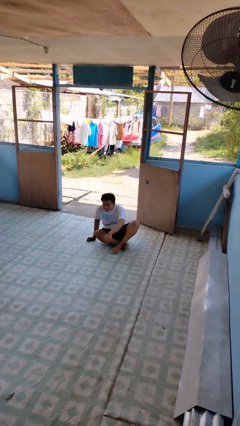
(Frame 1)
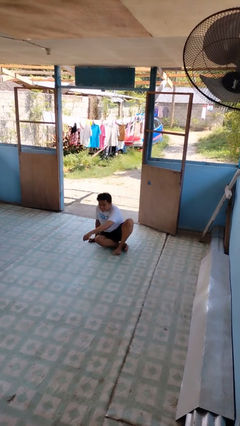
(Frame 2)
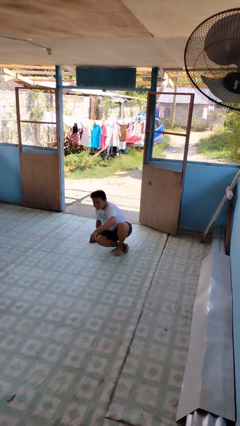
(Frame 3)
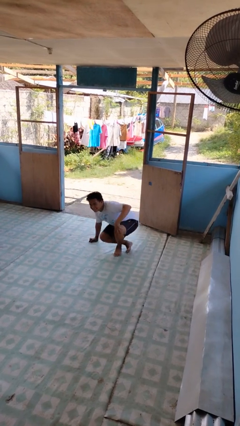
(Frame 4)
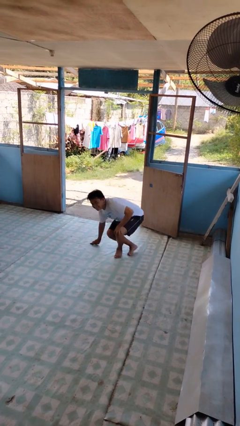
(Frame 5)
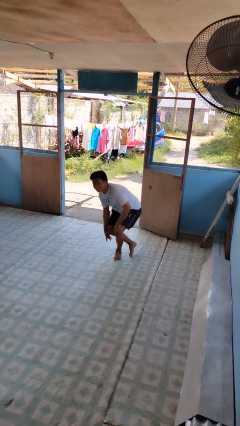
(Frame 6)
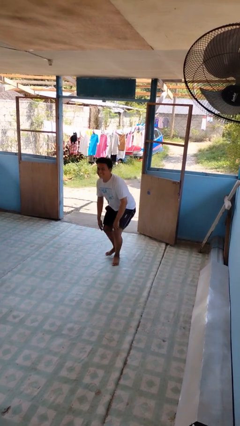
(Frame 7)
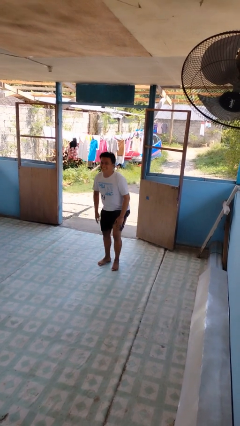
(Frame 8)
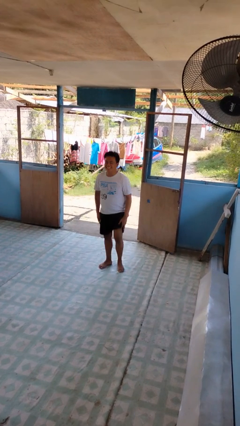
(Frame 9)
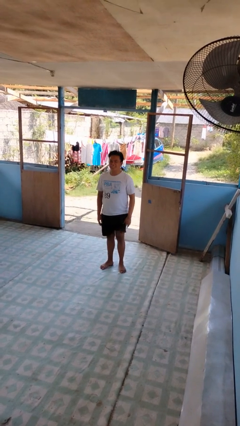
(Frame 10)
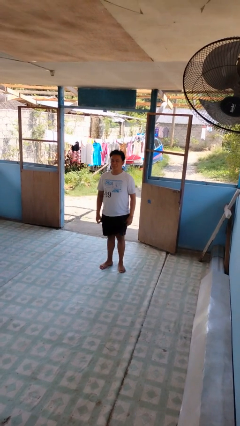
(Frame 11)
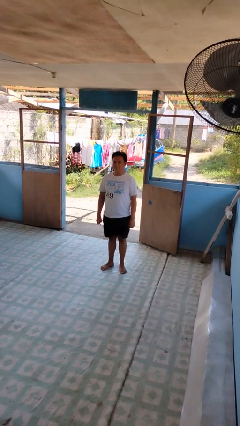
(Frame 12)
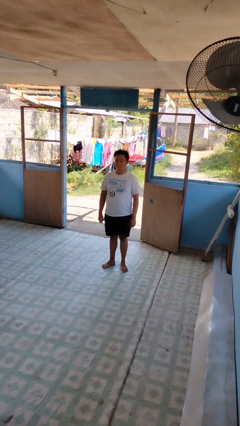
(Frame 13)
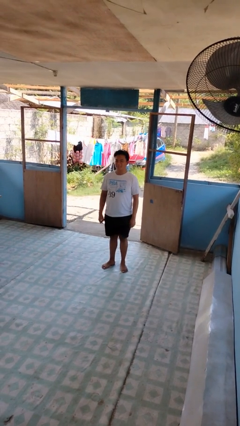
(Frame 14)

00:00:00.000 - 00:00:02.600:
person stands up from floor

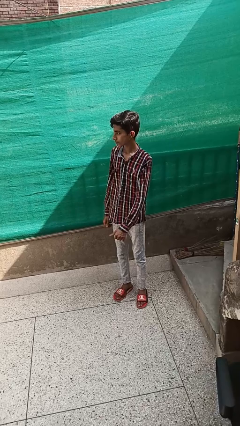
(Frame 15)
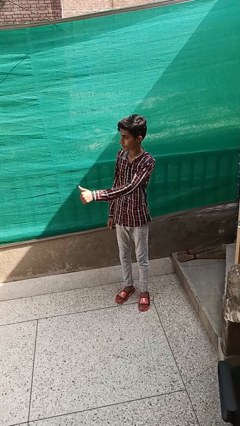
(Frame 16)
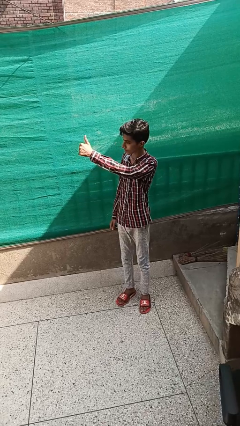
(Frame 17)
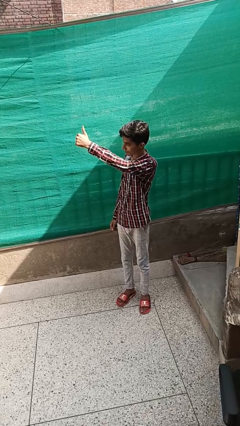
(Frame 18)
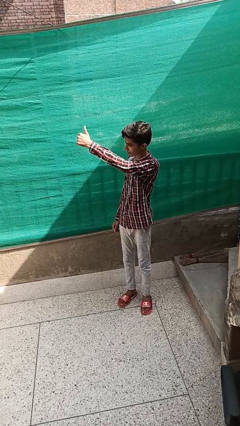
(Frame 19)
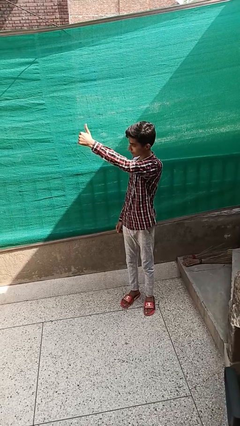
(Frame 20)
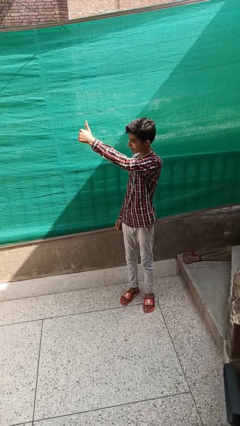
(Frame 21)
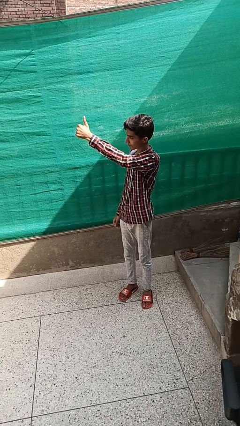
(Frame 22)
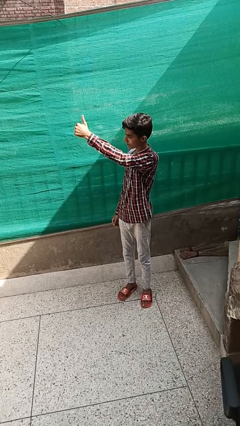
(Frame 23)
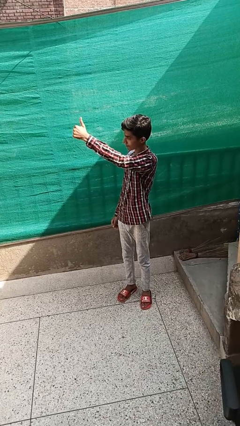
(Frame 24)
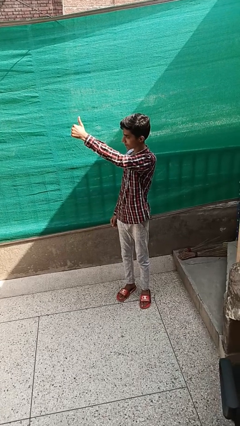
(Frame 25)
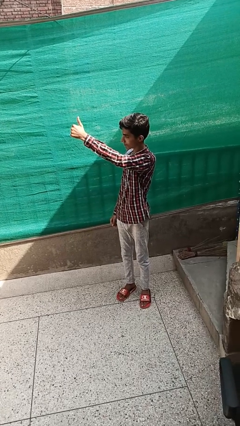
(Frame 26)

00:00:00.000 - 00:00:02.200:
person gestures thumbs up

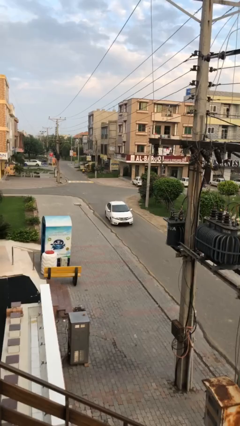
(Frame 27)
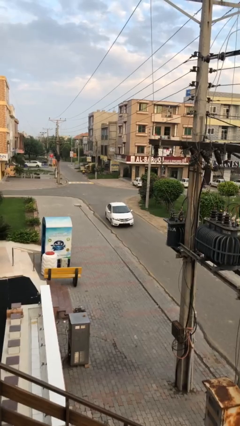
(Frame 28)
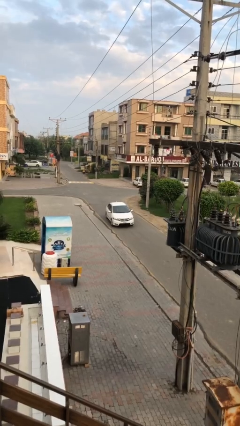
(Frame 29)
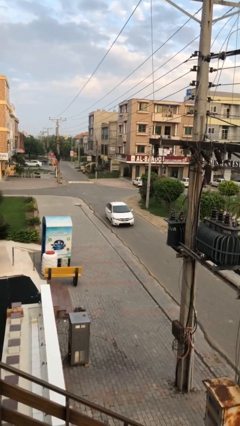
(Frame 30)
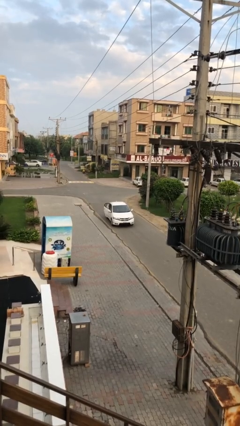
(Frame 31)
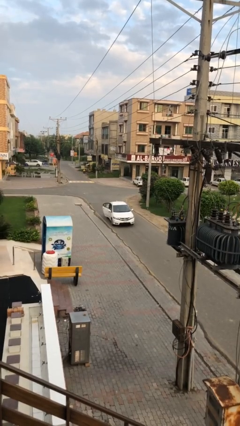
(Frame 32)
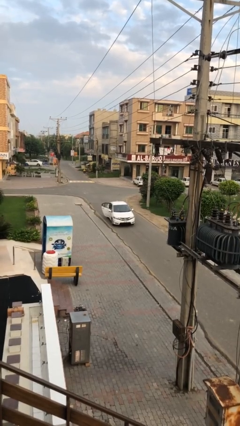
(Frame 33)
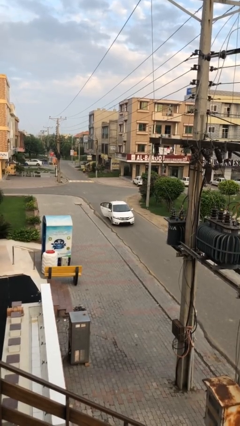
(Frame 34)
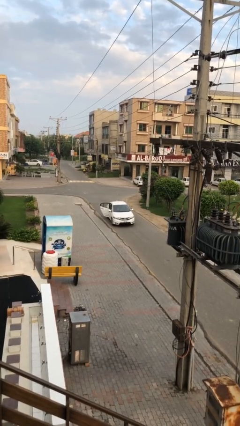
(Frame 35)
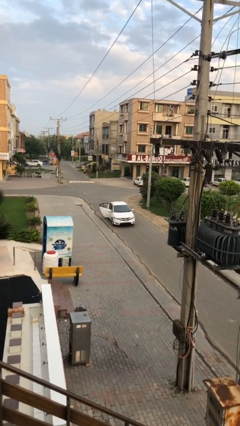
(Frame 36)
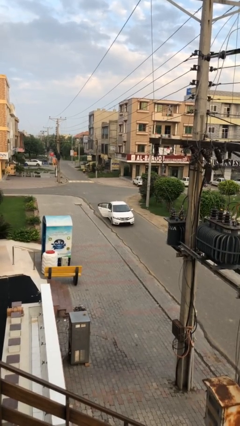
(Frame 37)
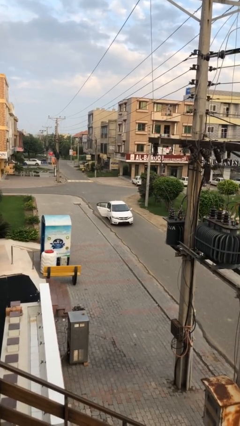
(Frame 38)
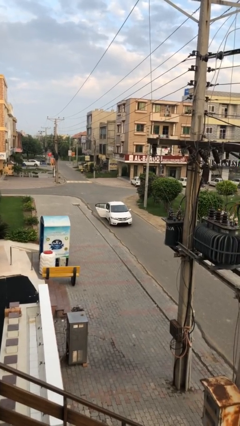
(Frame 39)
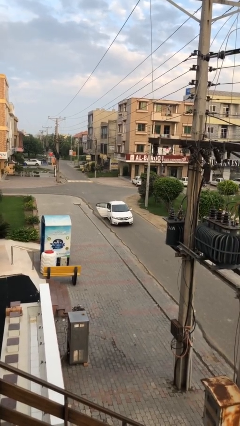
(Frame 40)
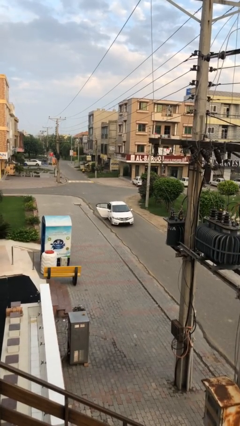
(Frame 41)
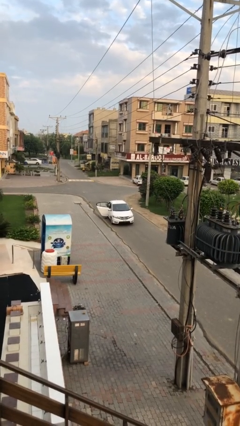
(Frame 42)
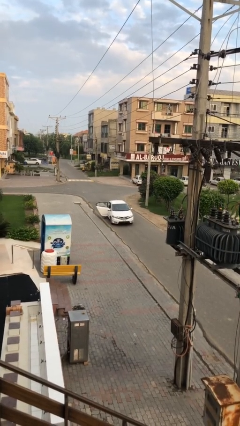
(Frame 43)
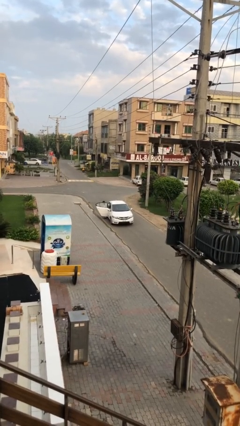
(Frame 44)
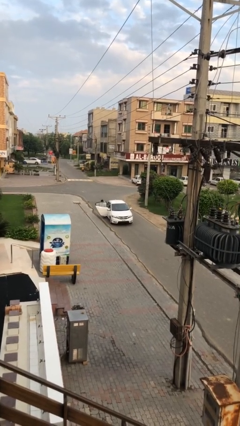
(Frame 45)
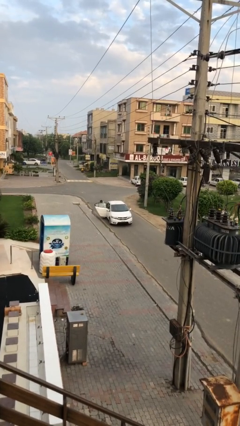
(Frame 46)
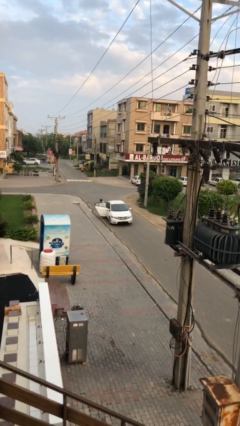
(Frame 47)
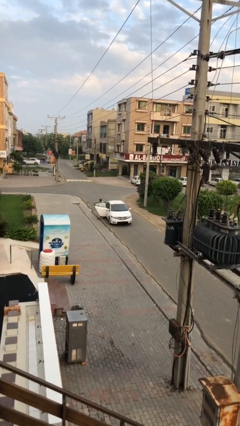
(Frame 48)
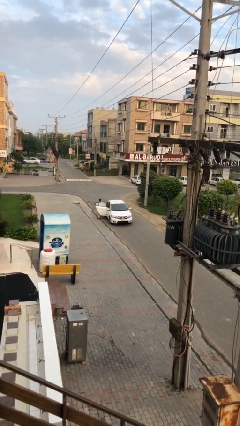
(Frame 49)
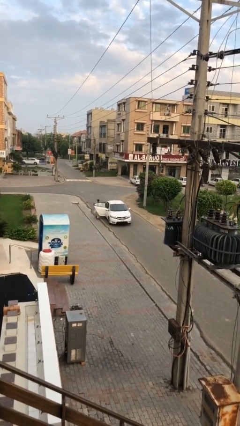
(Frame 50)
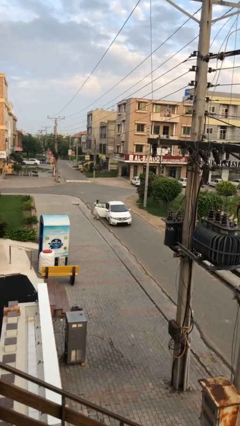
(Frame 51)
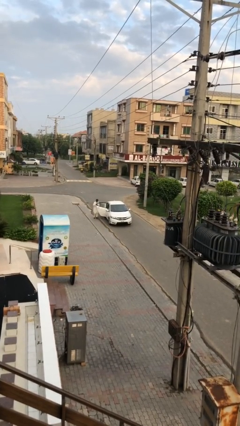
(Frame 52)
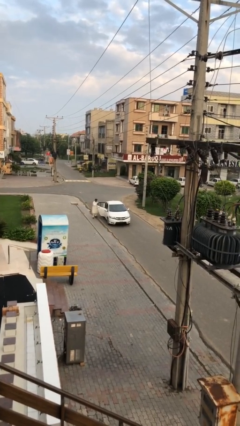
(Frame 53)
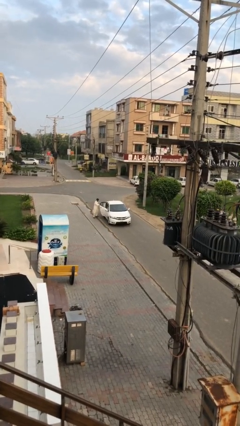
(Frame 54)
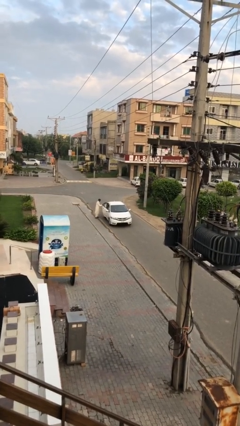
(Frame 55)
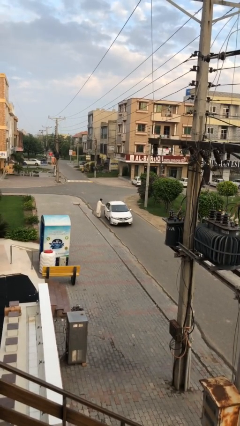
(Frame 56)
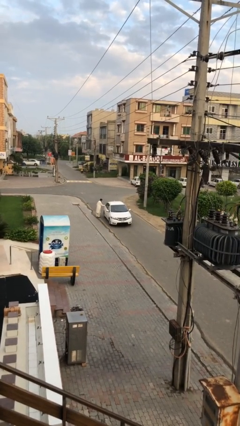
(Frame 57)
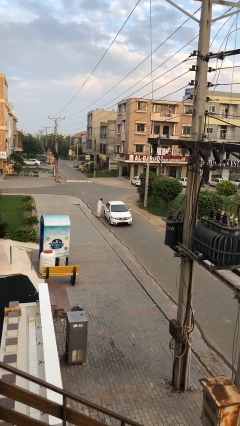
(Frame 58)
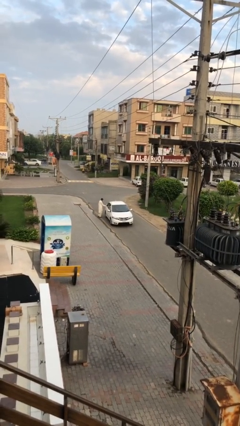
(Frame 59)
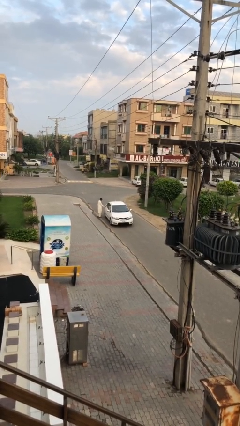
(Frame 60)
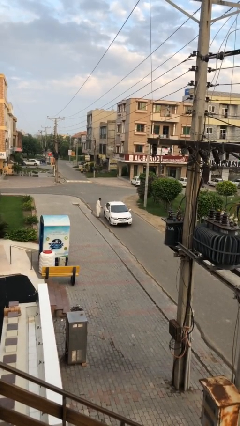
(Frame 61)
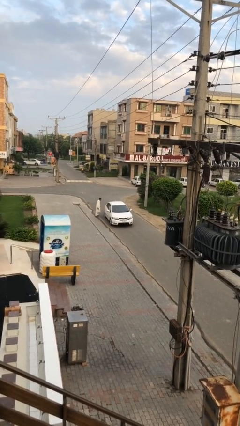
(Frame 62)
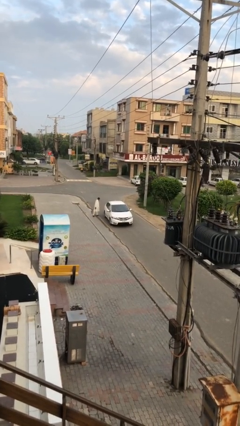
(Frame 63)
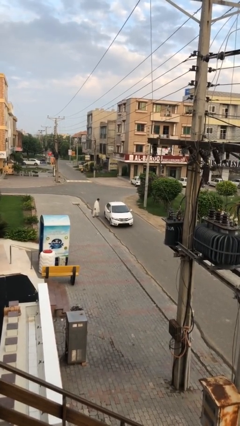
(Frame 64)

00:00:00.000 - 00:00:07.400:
car drops off person

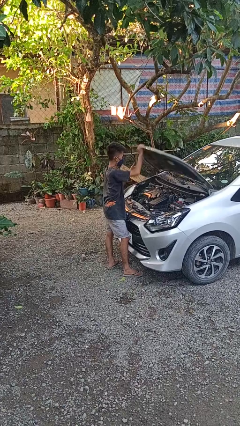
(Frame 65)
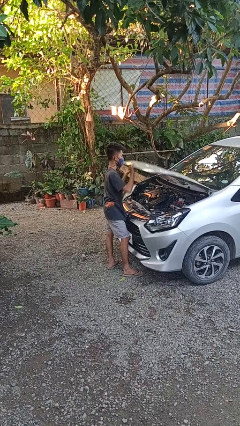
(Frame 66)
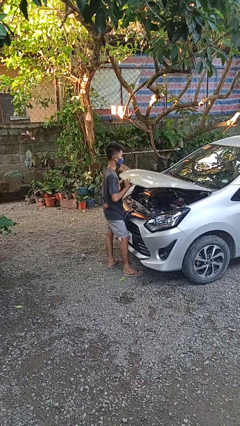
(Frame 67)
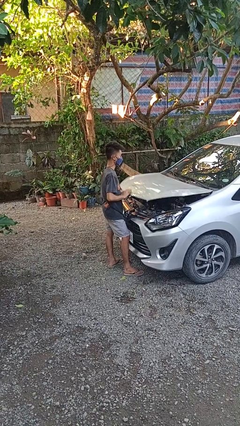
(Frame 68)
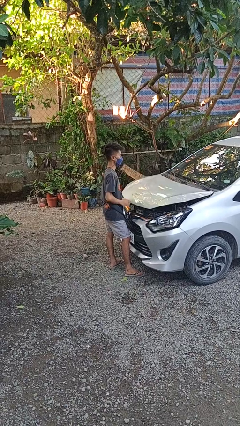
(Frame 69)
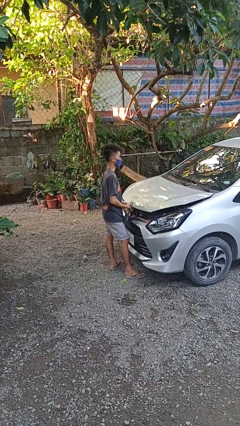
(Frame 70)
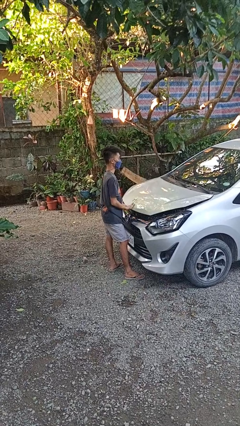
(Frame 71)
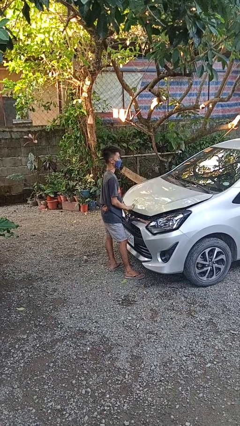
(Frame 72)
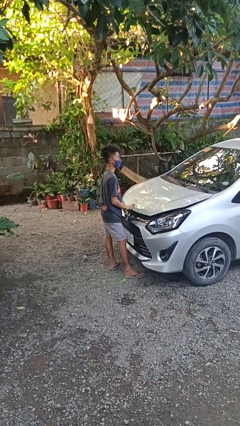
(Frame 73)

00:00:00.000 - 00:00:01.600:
person closes car hood

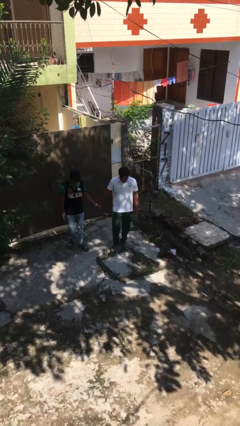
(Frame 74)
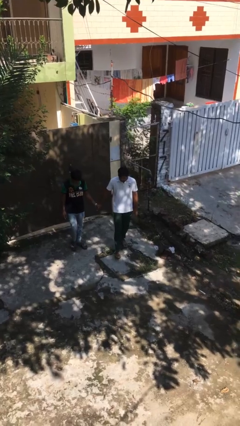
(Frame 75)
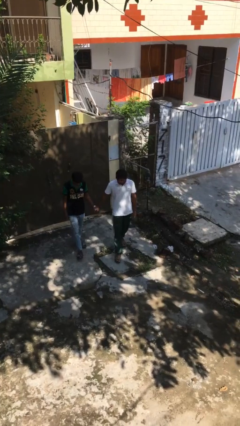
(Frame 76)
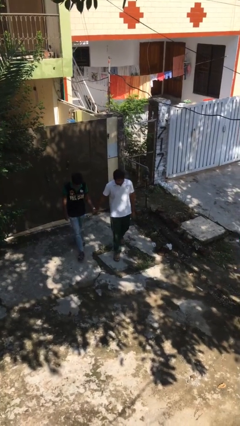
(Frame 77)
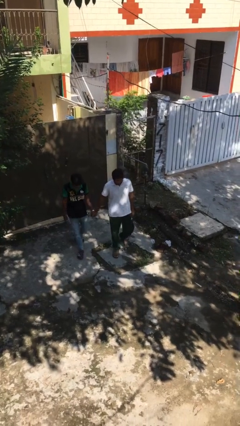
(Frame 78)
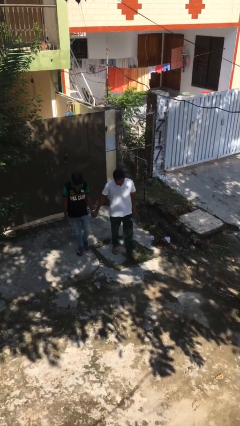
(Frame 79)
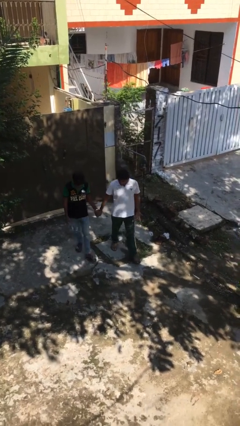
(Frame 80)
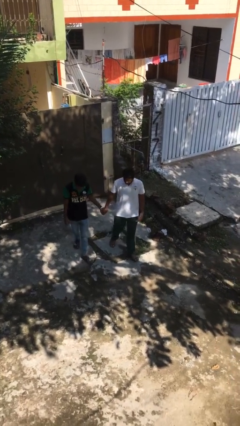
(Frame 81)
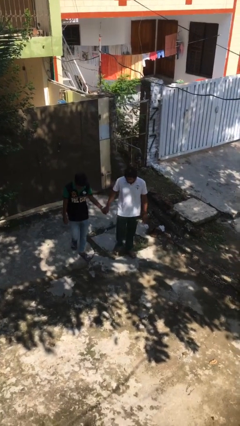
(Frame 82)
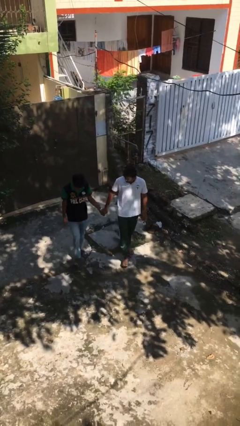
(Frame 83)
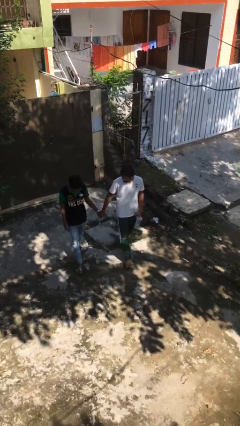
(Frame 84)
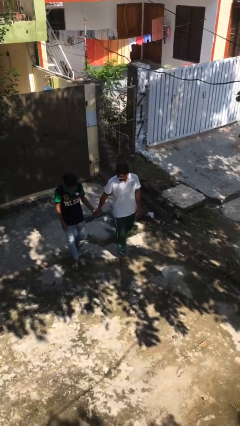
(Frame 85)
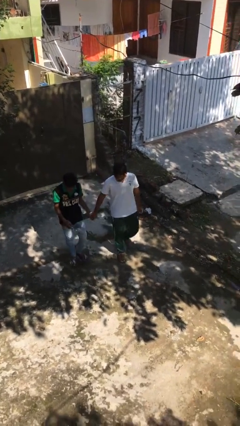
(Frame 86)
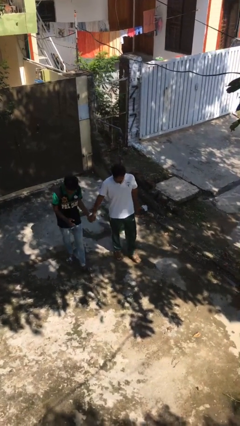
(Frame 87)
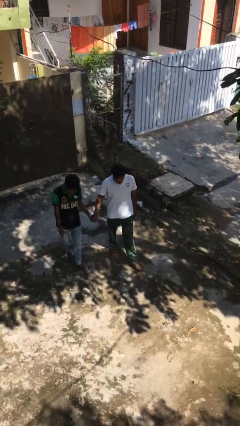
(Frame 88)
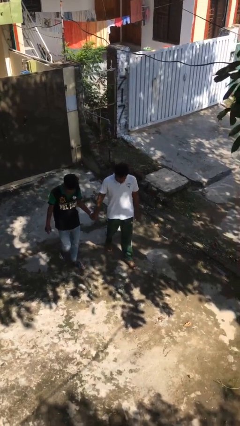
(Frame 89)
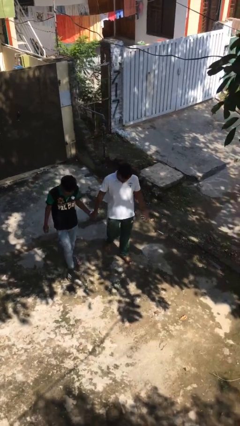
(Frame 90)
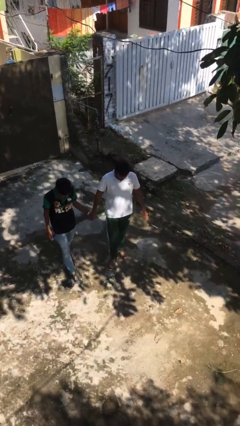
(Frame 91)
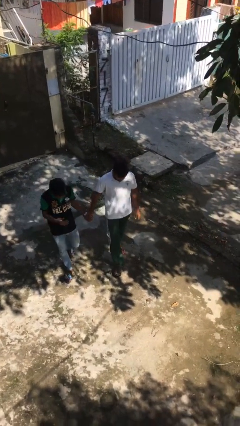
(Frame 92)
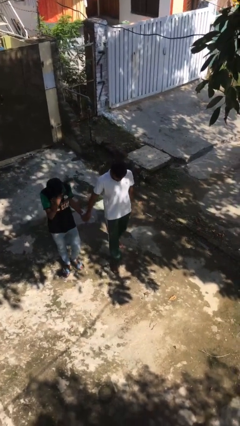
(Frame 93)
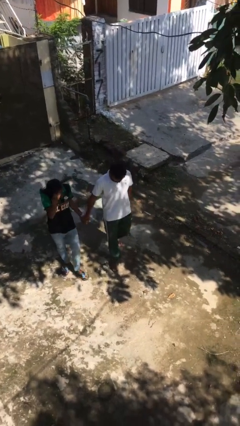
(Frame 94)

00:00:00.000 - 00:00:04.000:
person holds hand

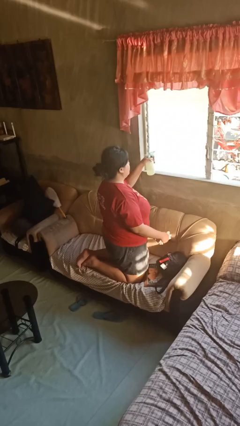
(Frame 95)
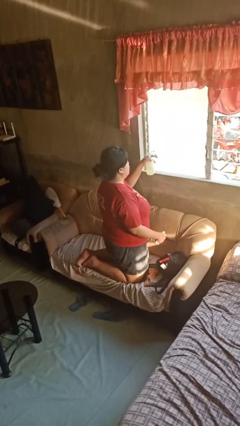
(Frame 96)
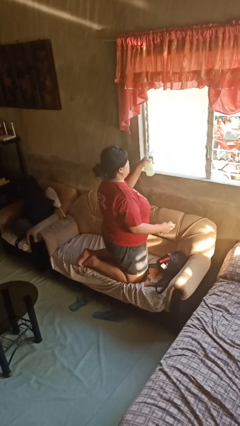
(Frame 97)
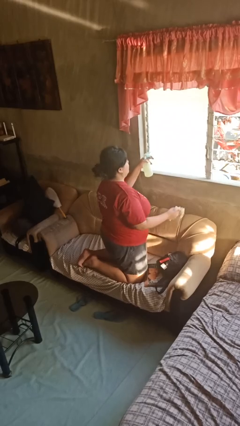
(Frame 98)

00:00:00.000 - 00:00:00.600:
person sprays from bottle
